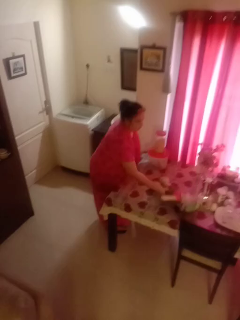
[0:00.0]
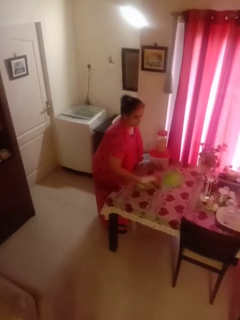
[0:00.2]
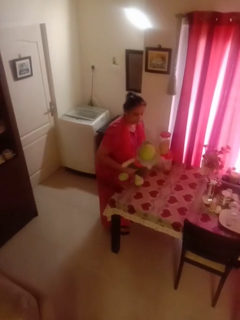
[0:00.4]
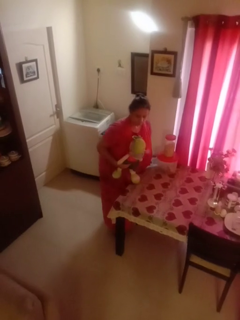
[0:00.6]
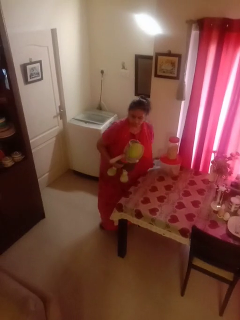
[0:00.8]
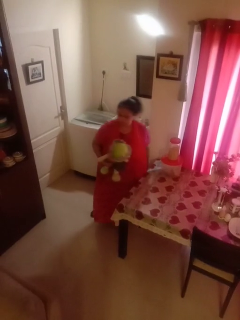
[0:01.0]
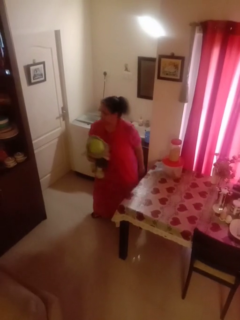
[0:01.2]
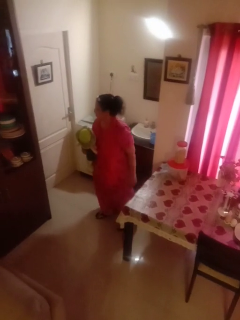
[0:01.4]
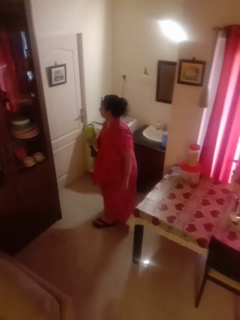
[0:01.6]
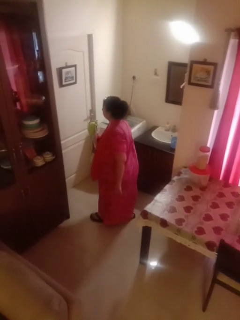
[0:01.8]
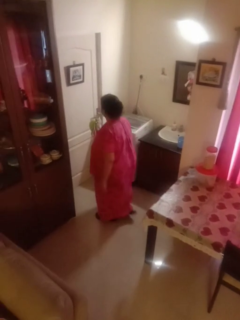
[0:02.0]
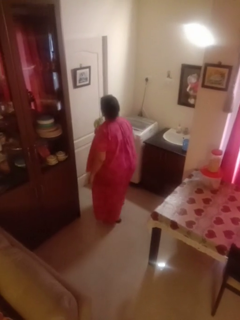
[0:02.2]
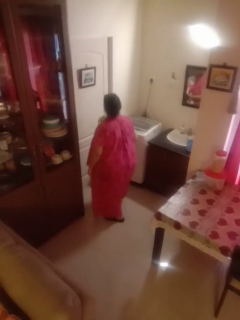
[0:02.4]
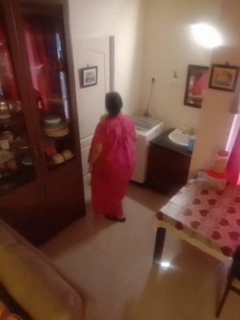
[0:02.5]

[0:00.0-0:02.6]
person picks up object from table

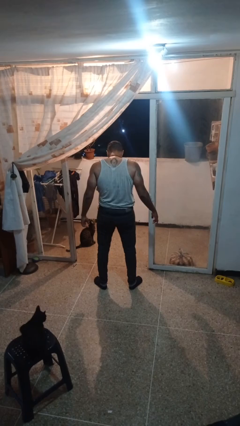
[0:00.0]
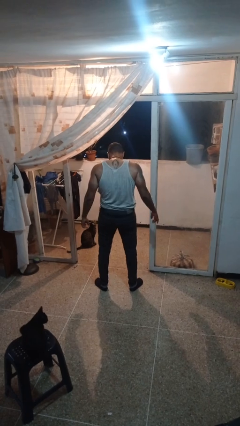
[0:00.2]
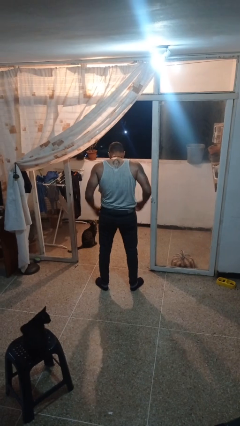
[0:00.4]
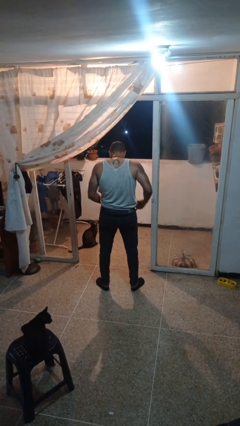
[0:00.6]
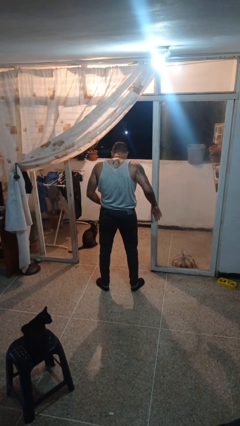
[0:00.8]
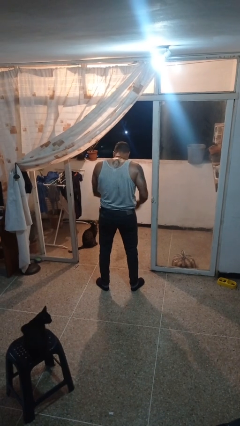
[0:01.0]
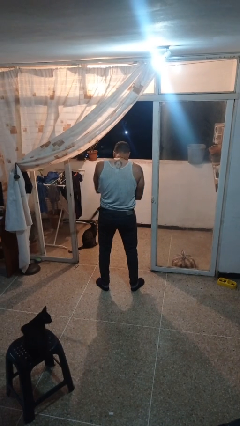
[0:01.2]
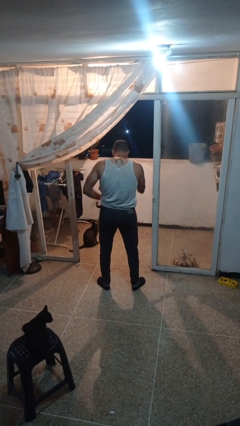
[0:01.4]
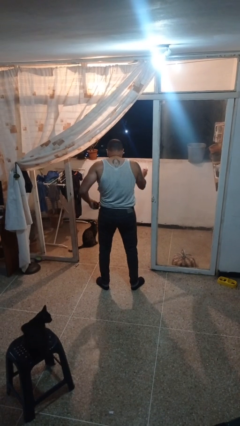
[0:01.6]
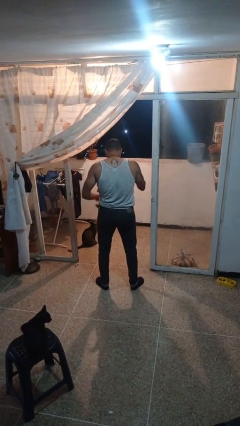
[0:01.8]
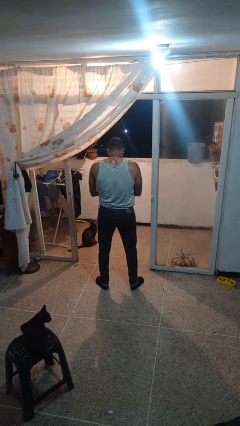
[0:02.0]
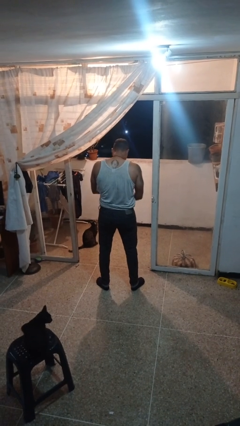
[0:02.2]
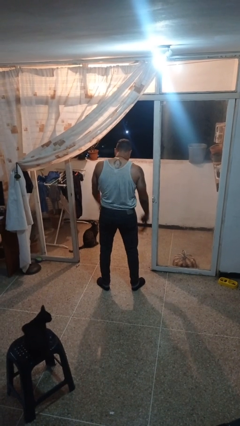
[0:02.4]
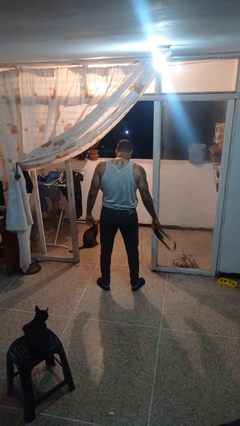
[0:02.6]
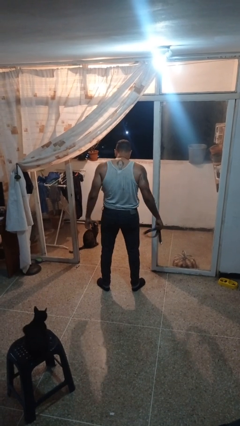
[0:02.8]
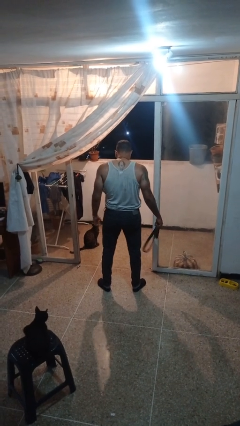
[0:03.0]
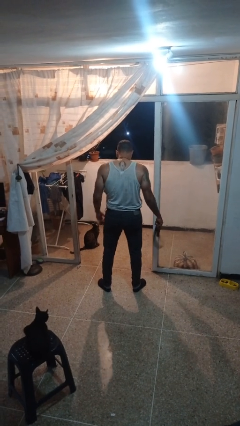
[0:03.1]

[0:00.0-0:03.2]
person takes off belt

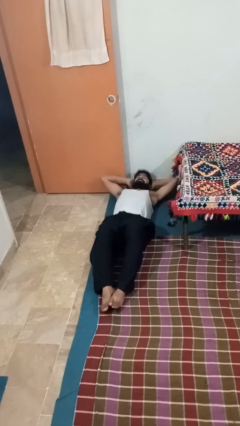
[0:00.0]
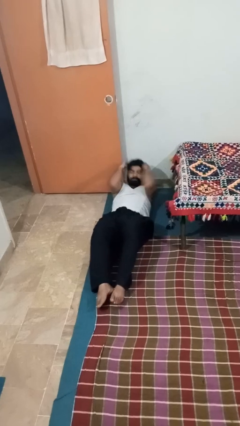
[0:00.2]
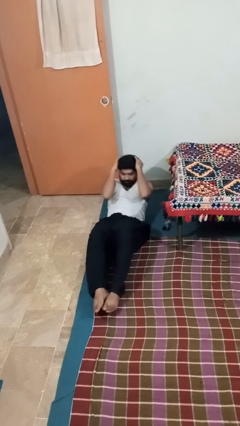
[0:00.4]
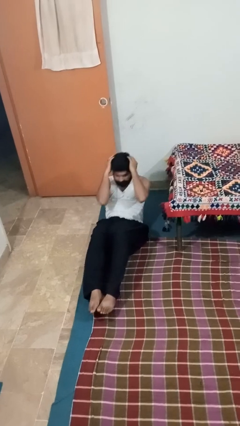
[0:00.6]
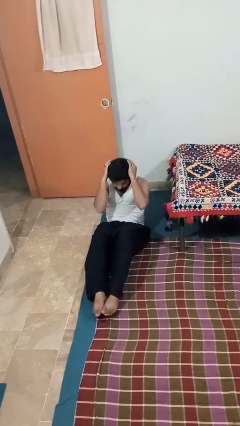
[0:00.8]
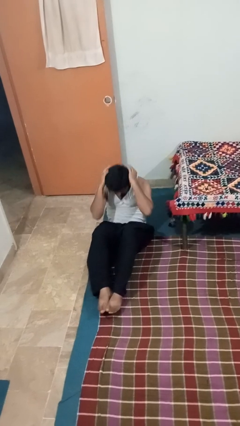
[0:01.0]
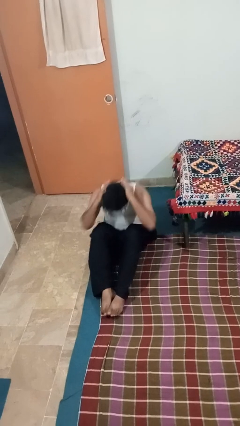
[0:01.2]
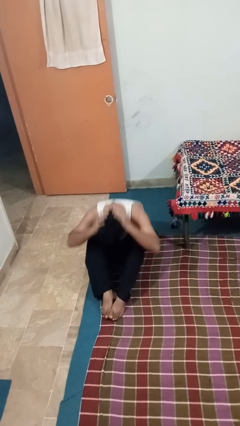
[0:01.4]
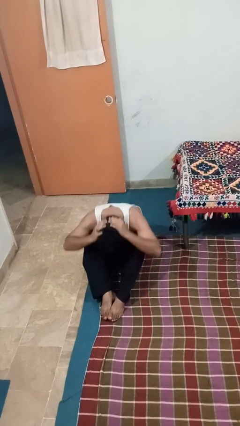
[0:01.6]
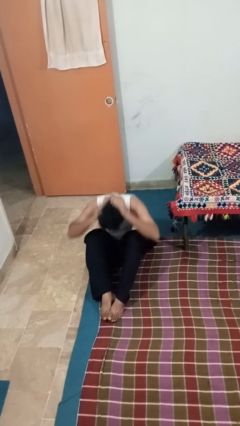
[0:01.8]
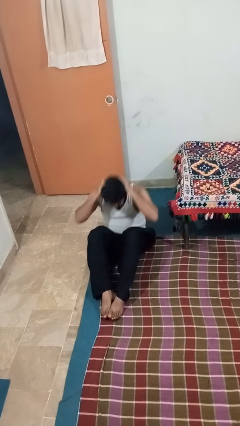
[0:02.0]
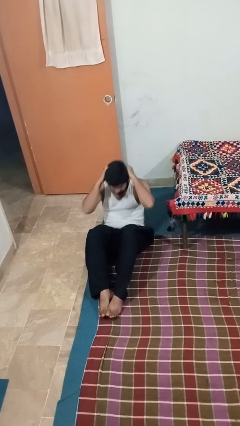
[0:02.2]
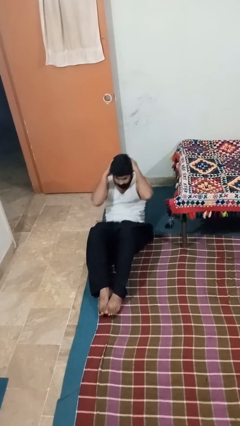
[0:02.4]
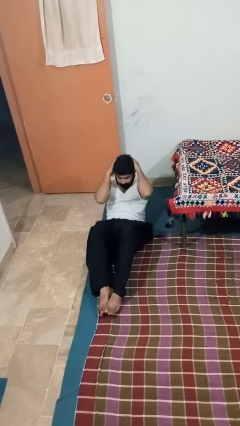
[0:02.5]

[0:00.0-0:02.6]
person exercises with situp

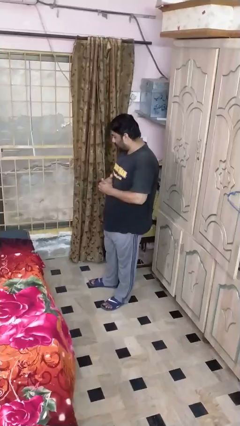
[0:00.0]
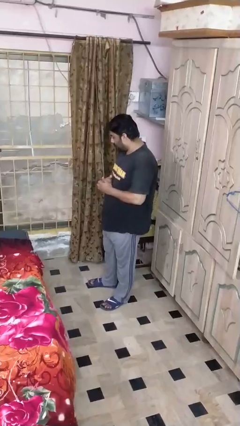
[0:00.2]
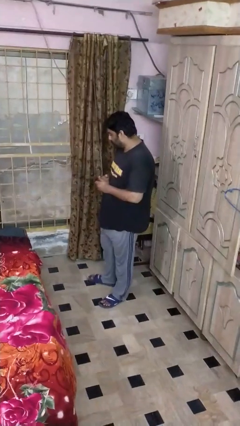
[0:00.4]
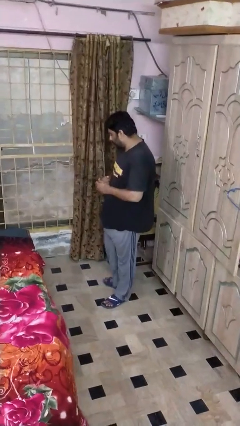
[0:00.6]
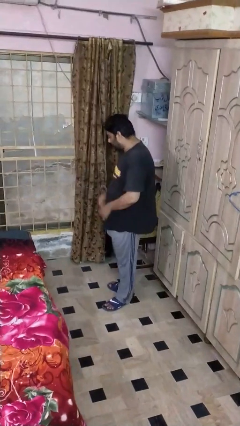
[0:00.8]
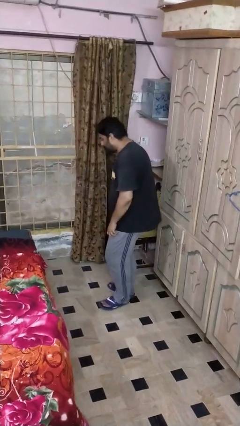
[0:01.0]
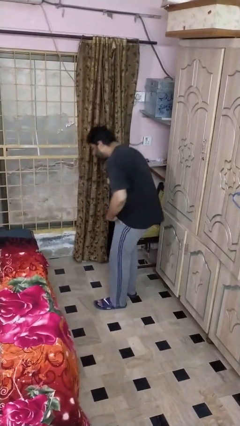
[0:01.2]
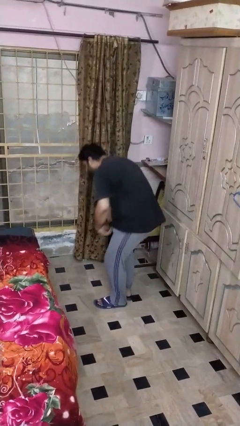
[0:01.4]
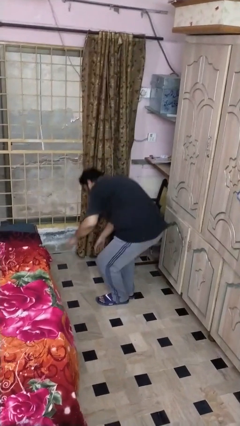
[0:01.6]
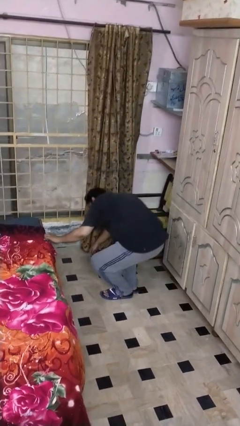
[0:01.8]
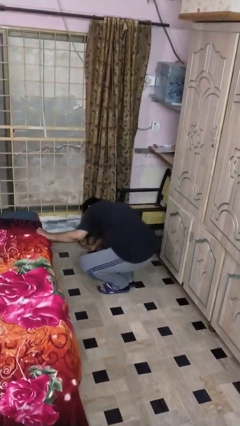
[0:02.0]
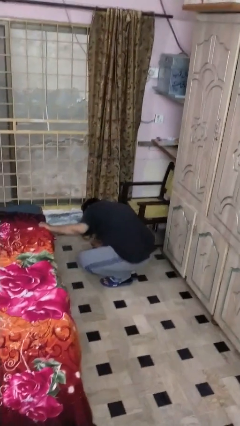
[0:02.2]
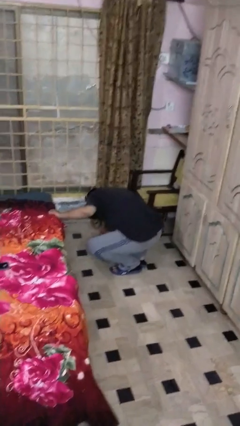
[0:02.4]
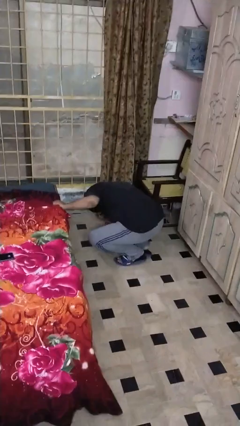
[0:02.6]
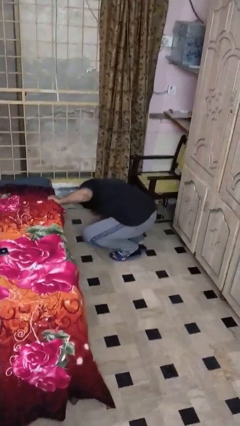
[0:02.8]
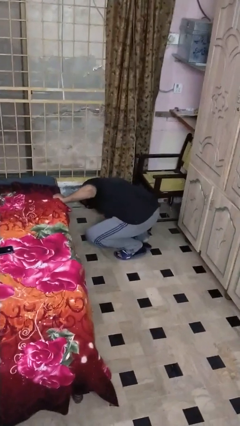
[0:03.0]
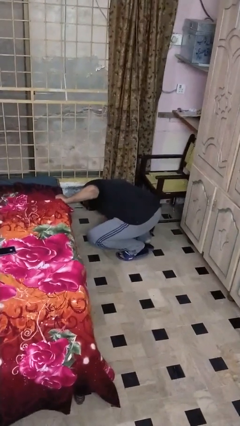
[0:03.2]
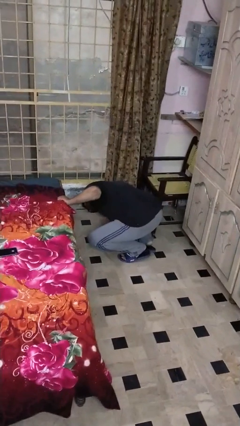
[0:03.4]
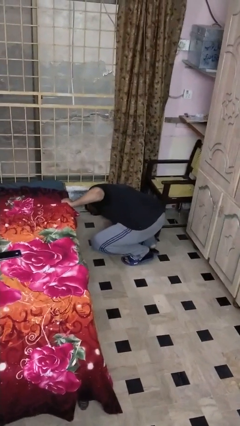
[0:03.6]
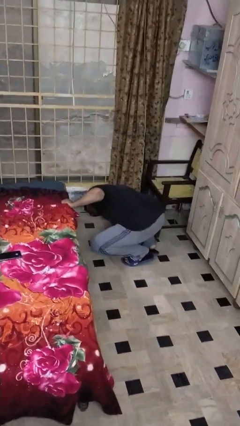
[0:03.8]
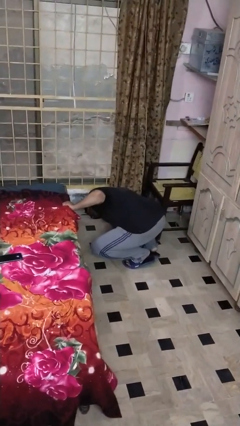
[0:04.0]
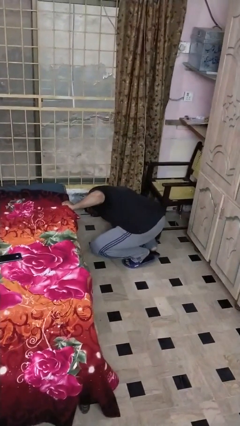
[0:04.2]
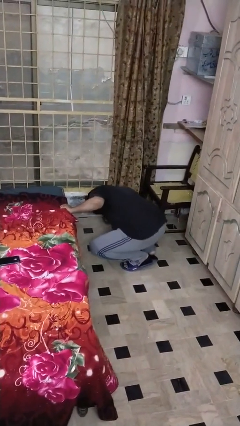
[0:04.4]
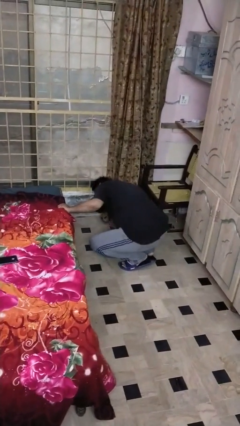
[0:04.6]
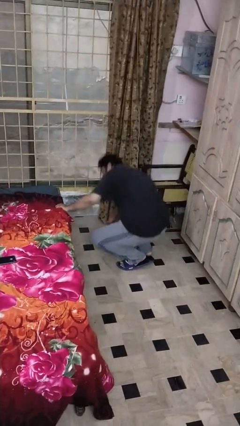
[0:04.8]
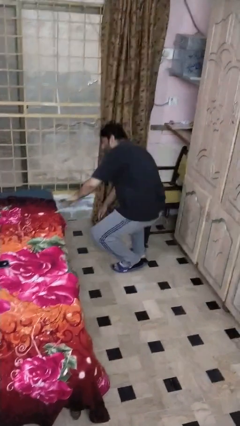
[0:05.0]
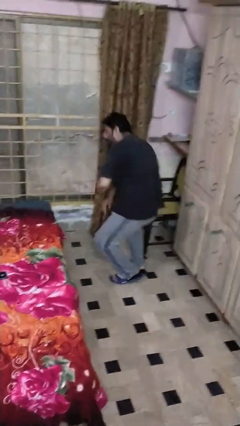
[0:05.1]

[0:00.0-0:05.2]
person searches under bed

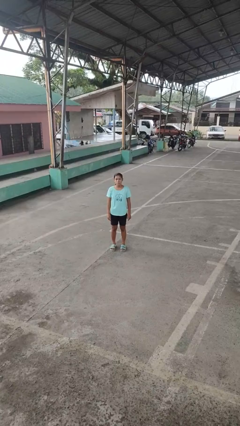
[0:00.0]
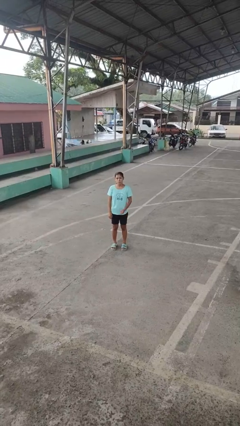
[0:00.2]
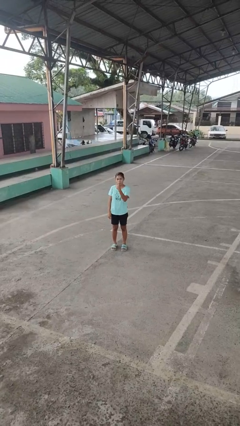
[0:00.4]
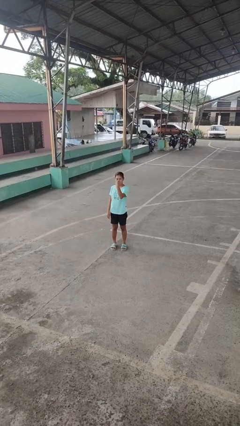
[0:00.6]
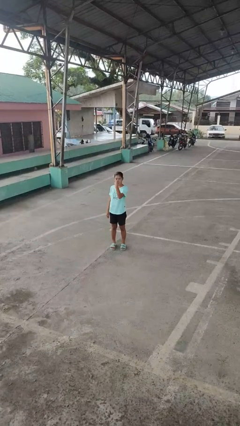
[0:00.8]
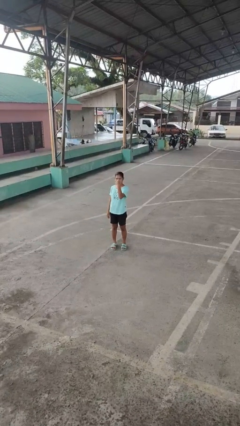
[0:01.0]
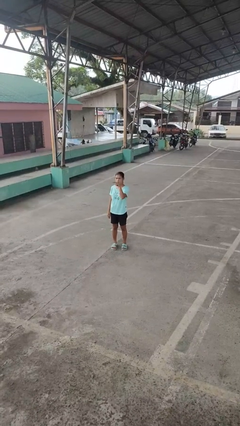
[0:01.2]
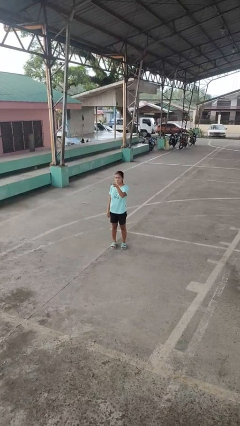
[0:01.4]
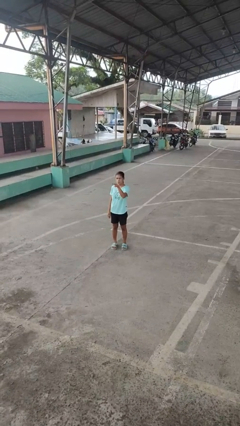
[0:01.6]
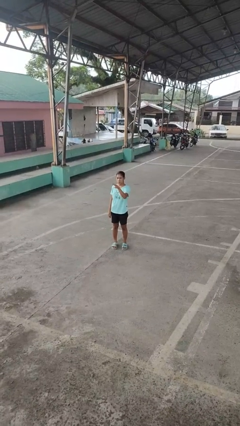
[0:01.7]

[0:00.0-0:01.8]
person gestures watch closely

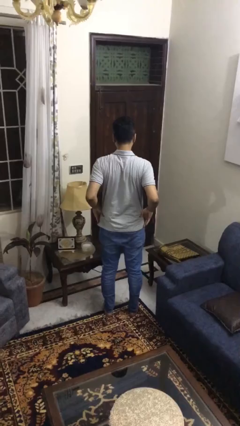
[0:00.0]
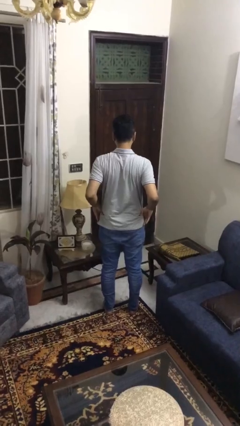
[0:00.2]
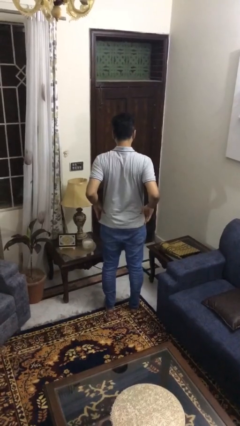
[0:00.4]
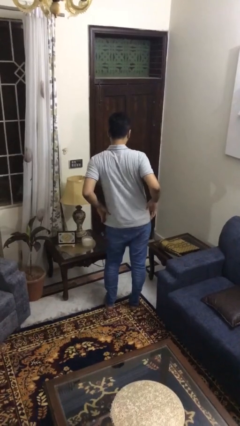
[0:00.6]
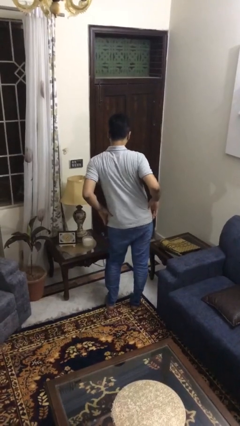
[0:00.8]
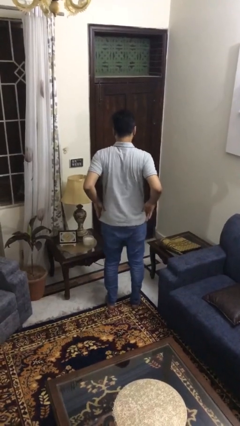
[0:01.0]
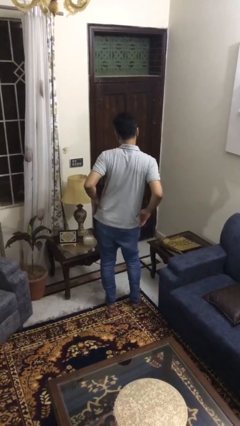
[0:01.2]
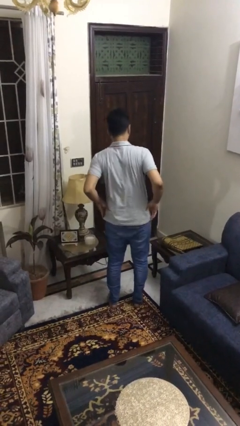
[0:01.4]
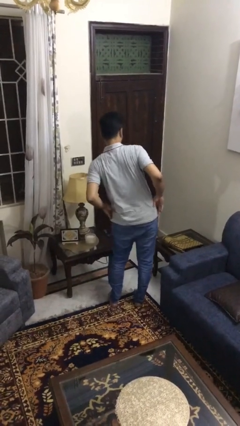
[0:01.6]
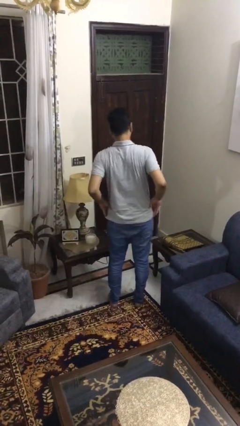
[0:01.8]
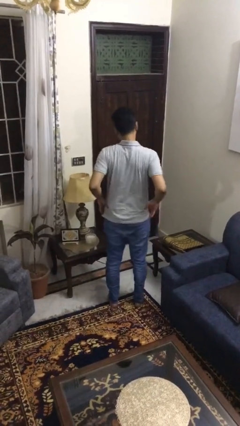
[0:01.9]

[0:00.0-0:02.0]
person wiggles hips

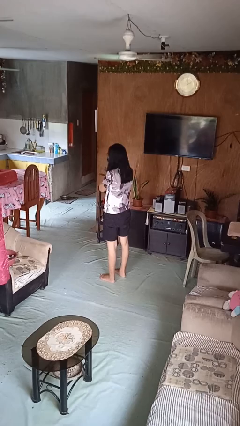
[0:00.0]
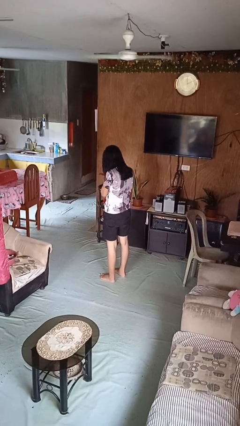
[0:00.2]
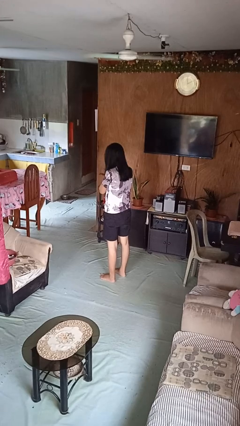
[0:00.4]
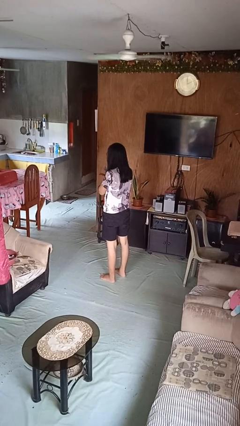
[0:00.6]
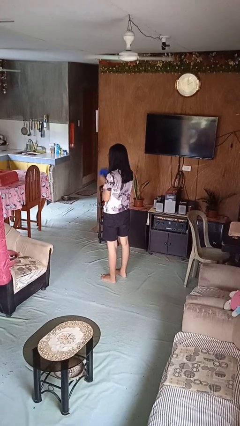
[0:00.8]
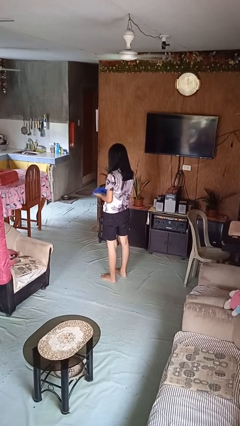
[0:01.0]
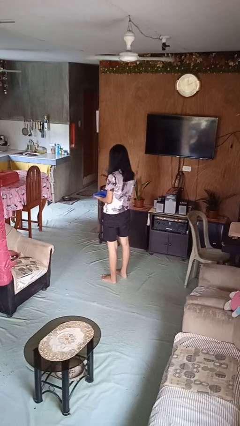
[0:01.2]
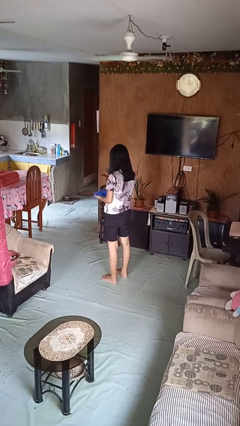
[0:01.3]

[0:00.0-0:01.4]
person blows nose
